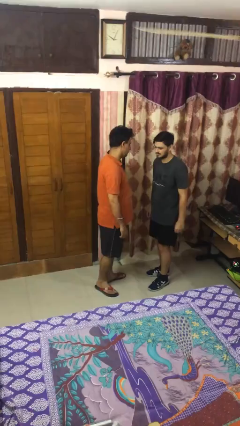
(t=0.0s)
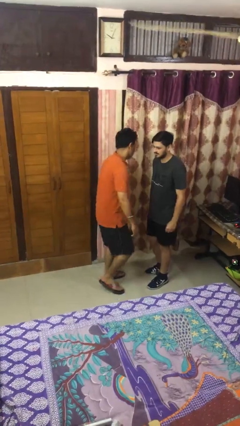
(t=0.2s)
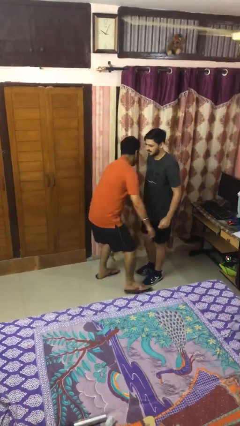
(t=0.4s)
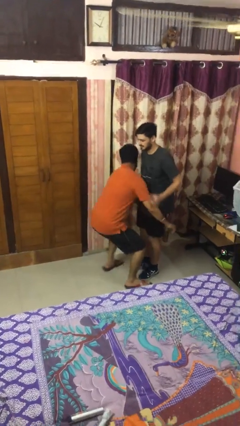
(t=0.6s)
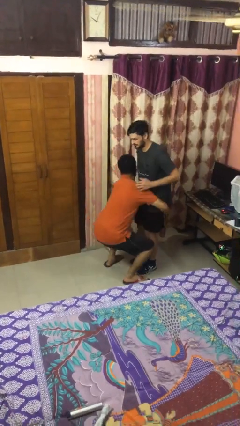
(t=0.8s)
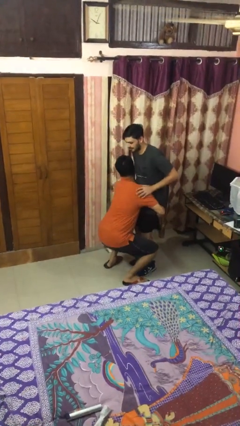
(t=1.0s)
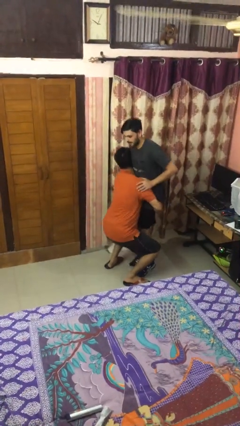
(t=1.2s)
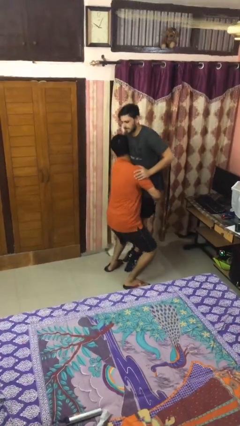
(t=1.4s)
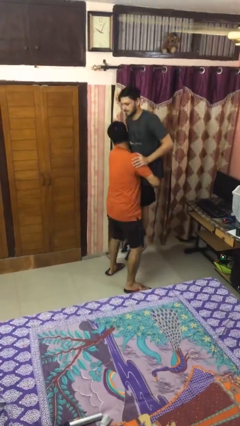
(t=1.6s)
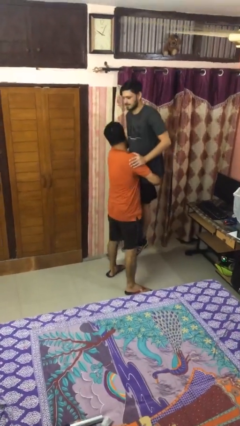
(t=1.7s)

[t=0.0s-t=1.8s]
person picks up person

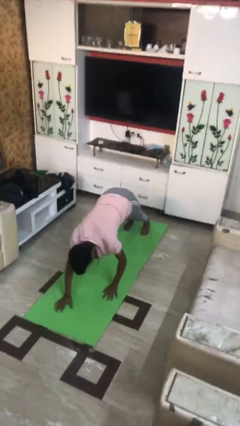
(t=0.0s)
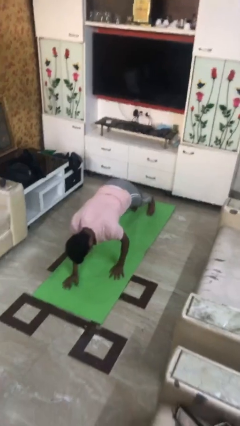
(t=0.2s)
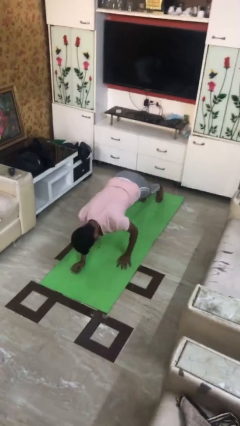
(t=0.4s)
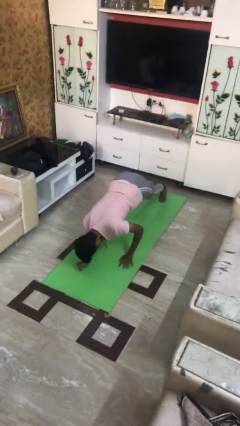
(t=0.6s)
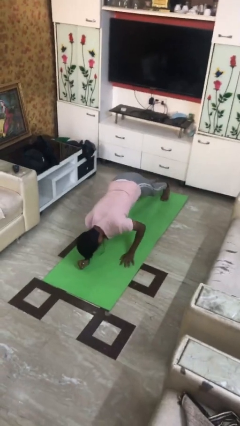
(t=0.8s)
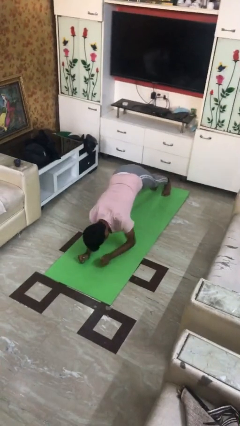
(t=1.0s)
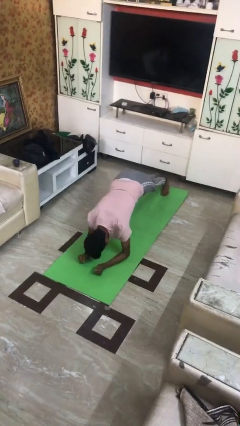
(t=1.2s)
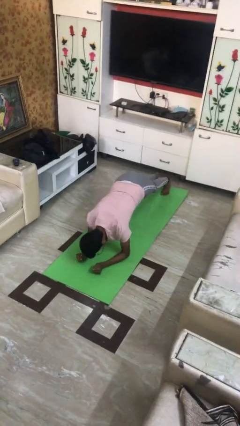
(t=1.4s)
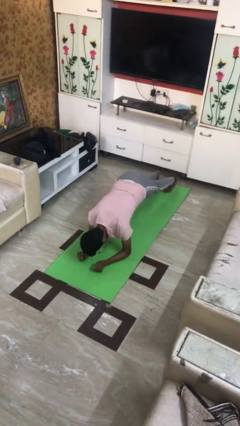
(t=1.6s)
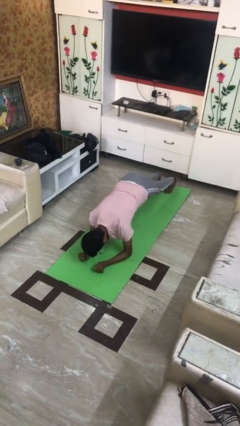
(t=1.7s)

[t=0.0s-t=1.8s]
person exercises with plank

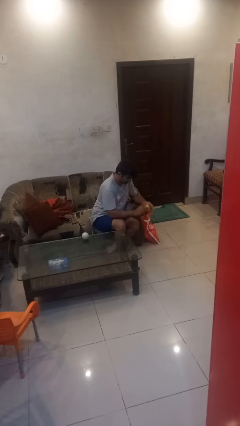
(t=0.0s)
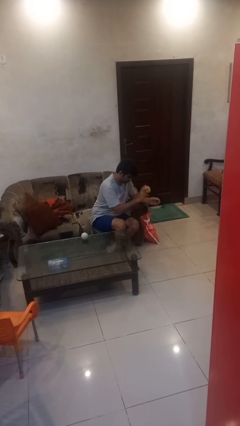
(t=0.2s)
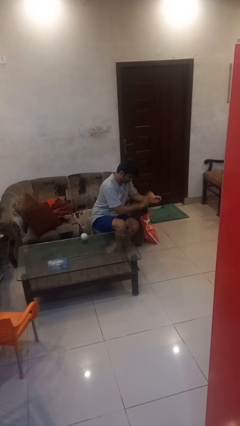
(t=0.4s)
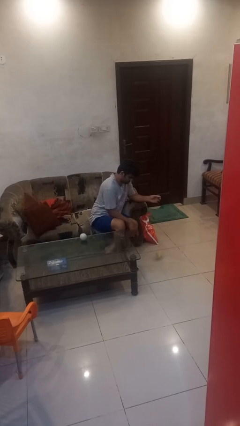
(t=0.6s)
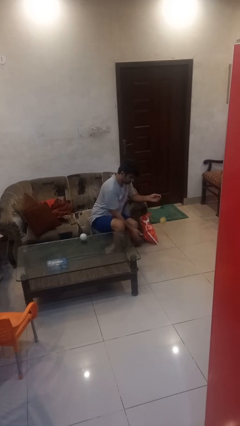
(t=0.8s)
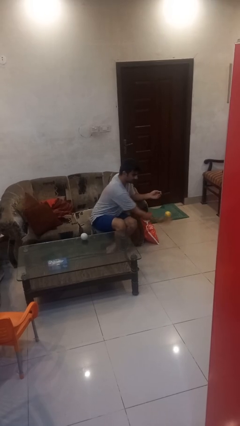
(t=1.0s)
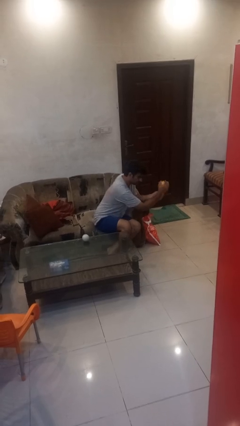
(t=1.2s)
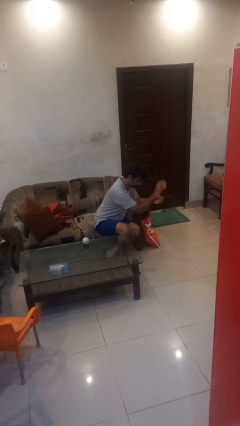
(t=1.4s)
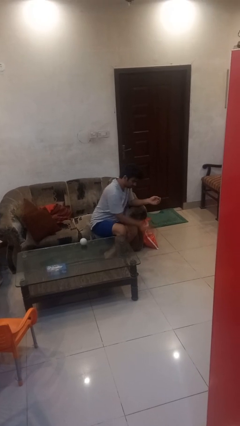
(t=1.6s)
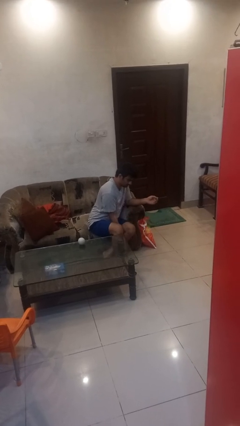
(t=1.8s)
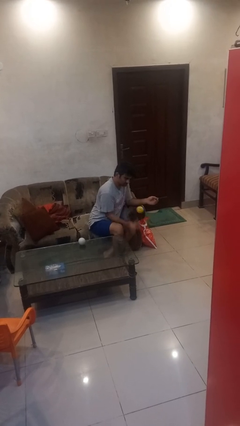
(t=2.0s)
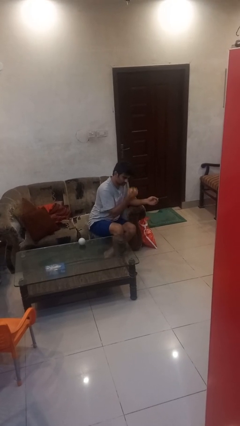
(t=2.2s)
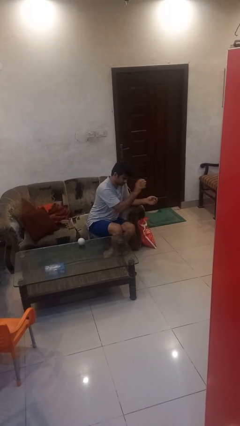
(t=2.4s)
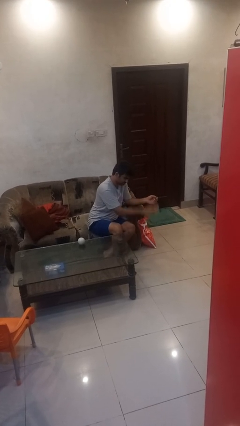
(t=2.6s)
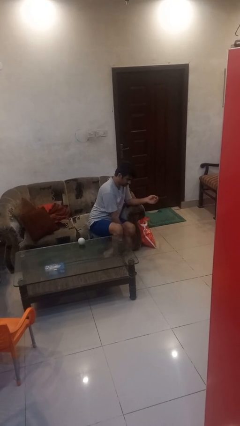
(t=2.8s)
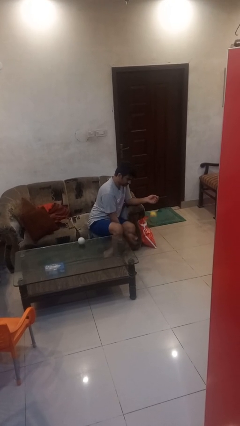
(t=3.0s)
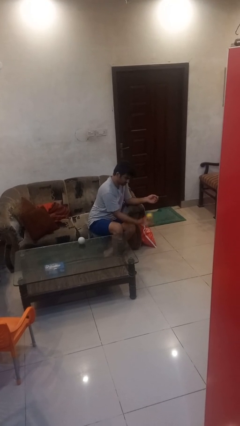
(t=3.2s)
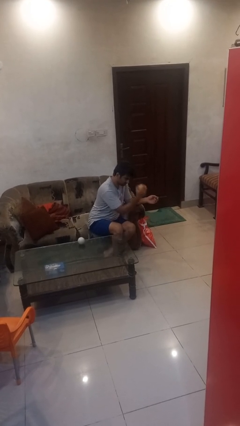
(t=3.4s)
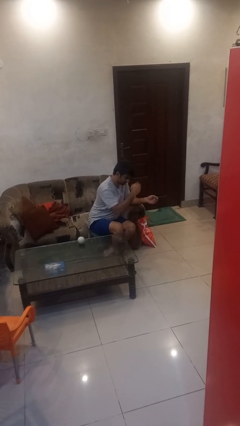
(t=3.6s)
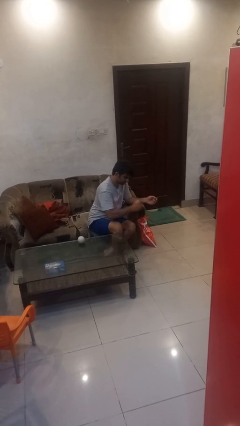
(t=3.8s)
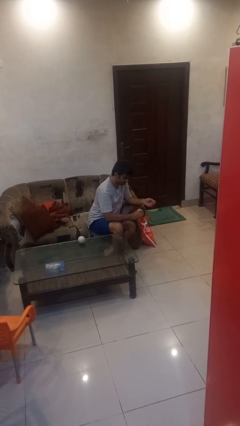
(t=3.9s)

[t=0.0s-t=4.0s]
person bounces ball on floor

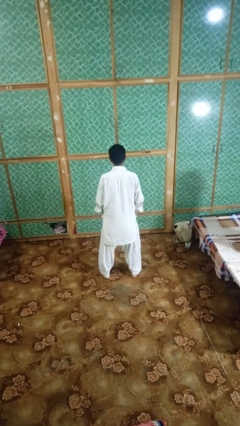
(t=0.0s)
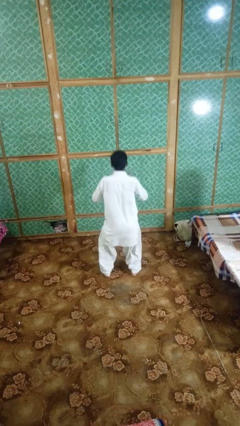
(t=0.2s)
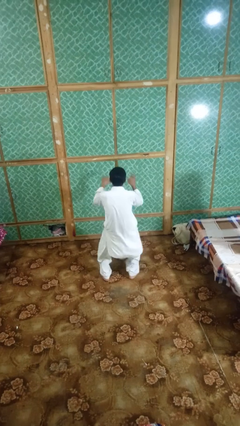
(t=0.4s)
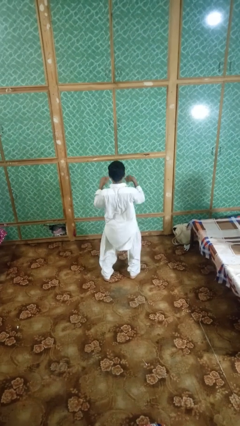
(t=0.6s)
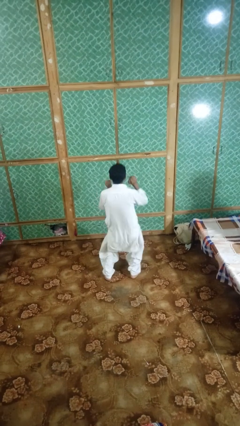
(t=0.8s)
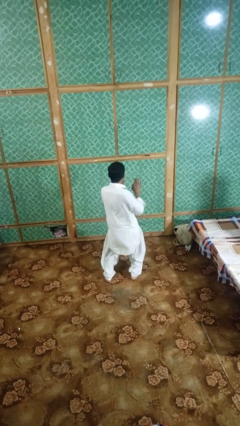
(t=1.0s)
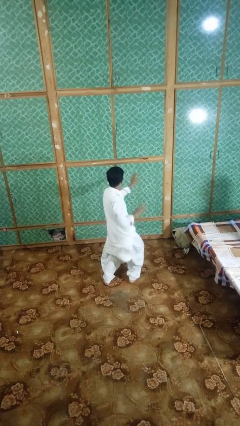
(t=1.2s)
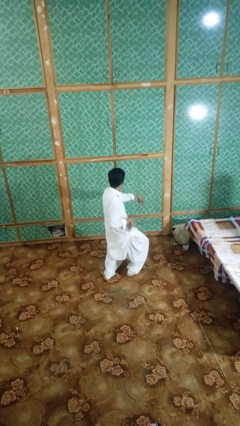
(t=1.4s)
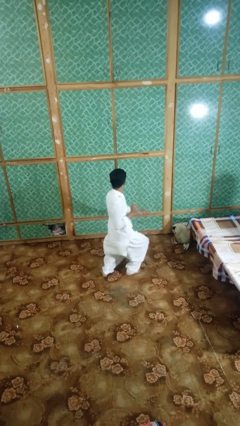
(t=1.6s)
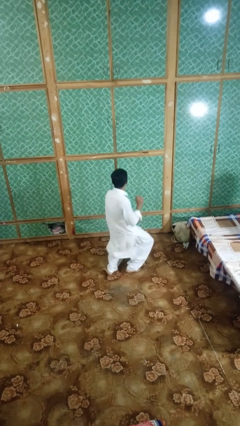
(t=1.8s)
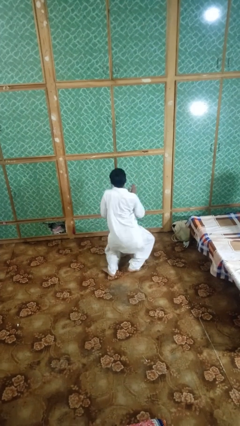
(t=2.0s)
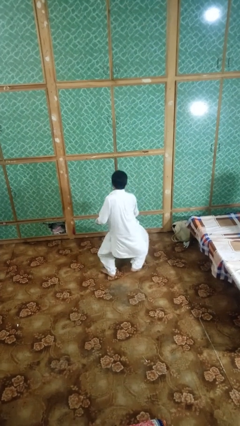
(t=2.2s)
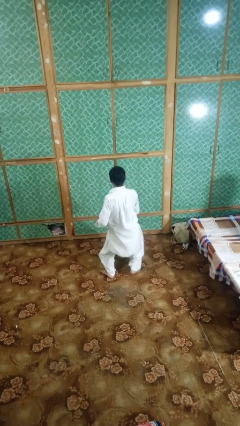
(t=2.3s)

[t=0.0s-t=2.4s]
person dances in place

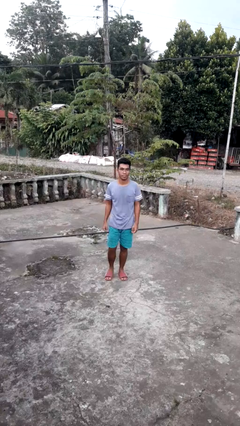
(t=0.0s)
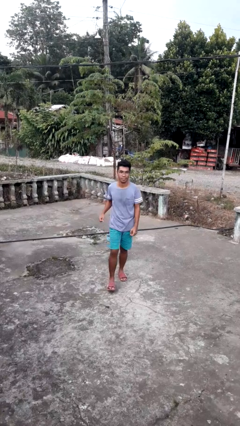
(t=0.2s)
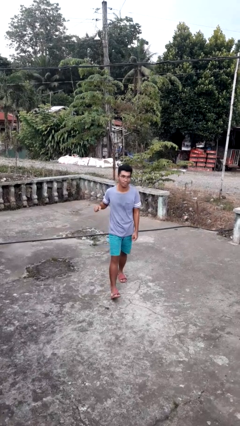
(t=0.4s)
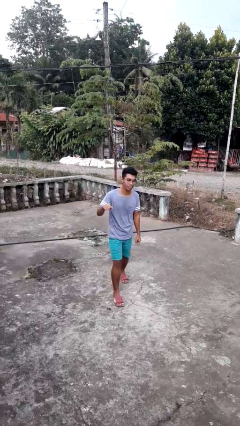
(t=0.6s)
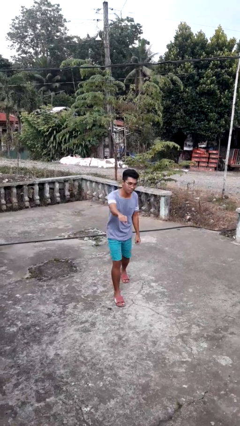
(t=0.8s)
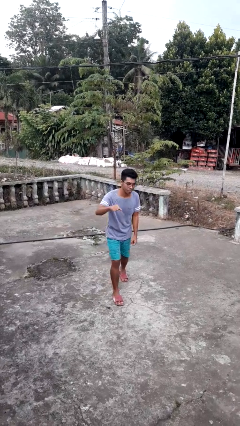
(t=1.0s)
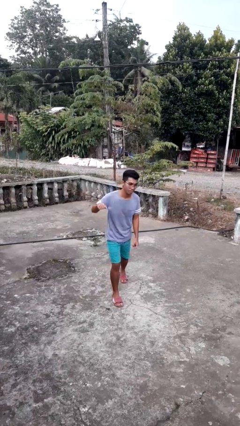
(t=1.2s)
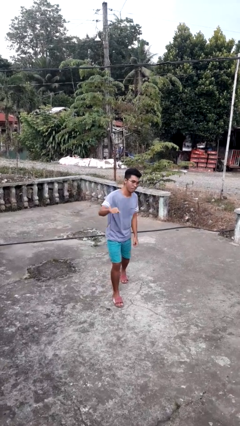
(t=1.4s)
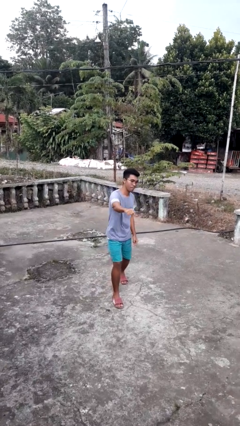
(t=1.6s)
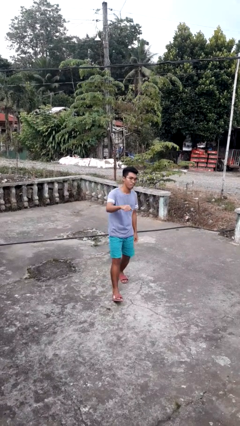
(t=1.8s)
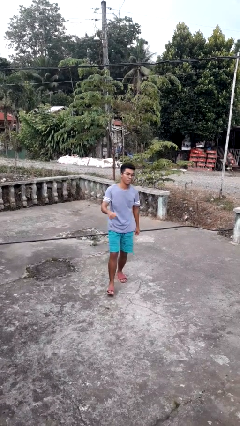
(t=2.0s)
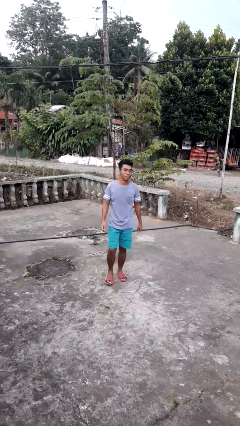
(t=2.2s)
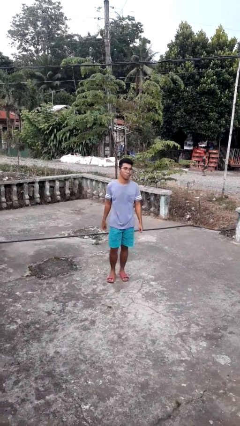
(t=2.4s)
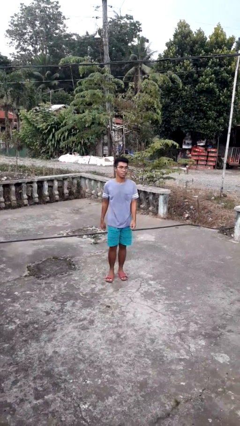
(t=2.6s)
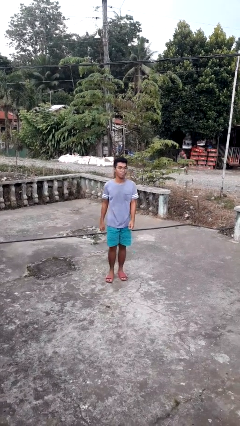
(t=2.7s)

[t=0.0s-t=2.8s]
person punches

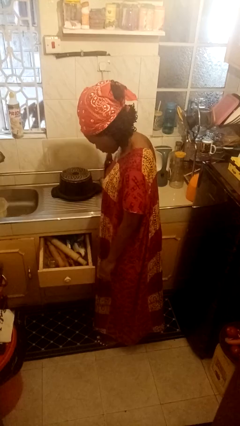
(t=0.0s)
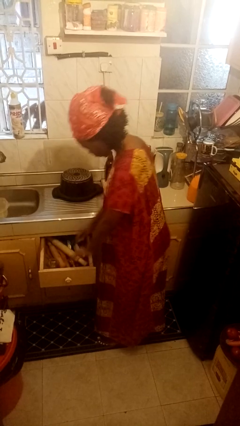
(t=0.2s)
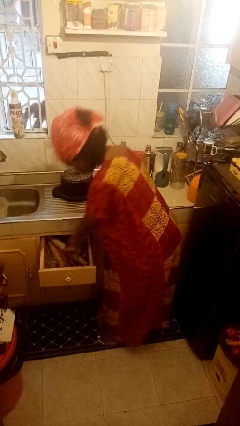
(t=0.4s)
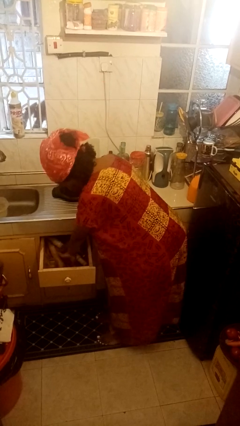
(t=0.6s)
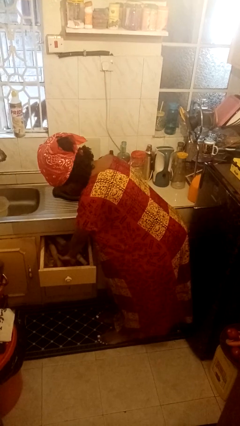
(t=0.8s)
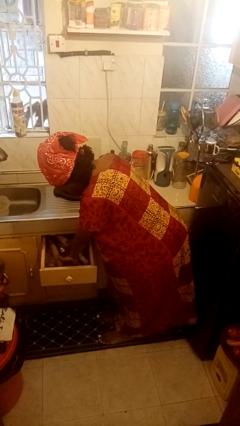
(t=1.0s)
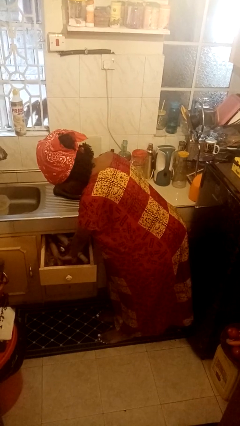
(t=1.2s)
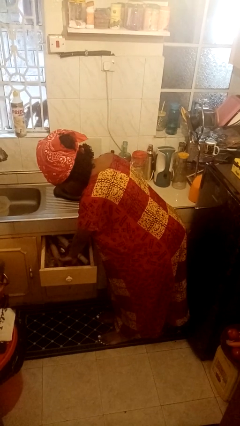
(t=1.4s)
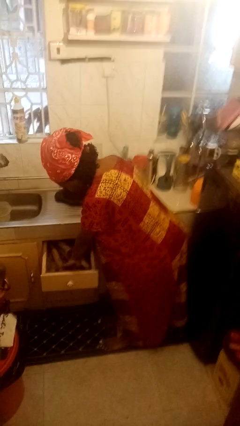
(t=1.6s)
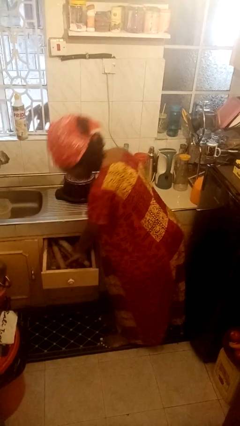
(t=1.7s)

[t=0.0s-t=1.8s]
person searches in kitchen drawer

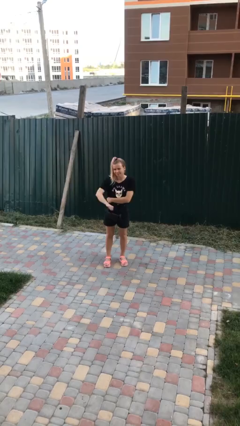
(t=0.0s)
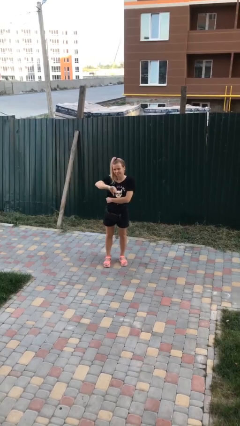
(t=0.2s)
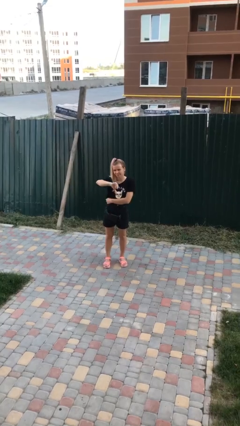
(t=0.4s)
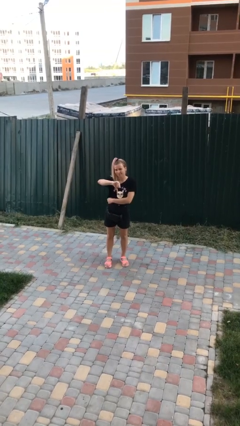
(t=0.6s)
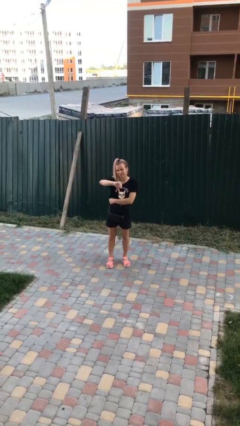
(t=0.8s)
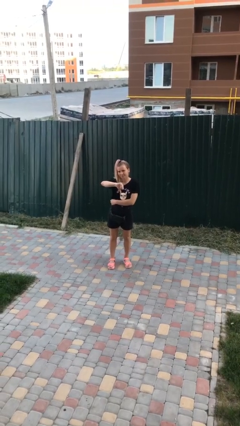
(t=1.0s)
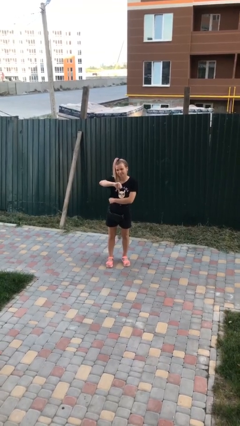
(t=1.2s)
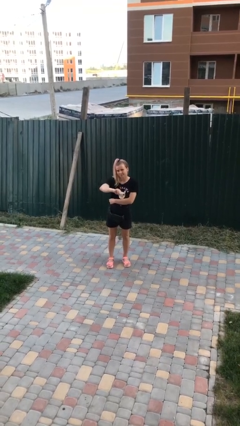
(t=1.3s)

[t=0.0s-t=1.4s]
person gestures thumbs down

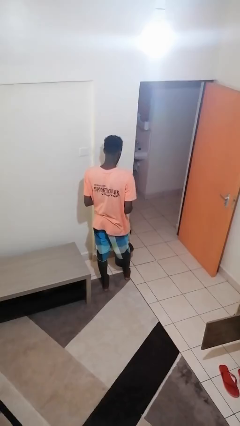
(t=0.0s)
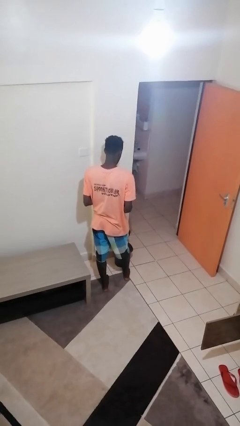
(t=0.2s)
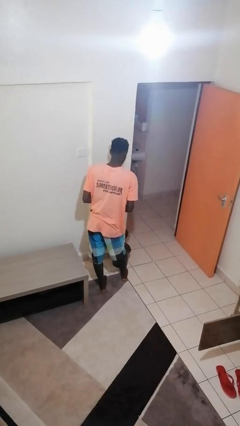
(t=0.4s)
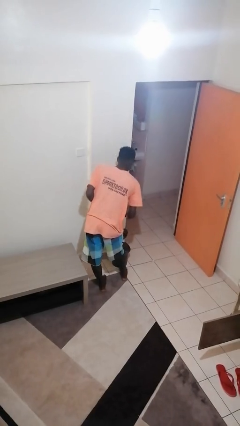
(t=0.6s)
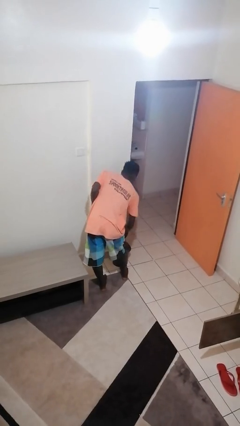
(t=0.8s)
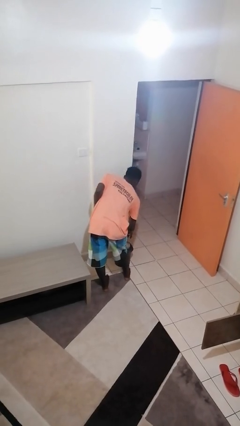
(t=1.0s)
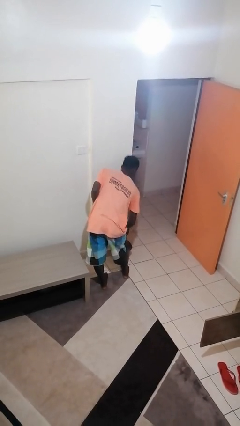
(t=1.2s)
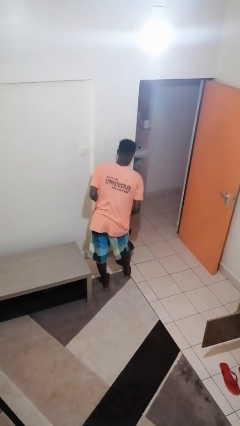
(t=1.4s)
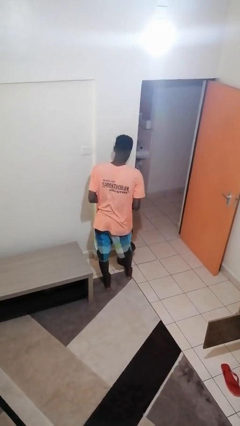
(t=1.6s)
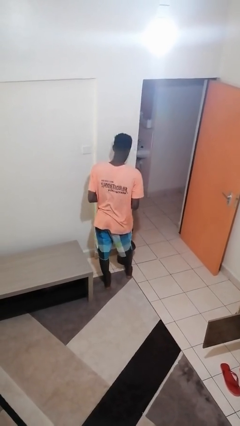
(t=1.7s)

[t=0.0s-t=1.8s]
person discards trash
